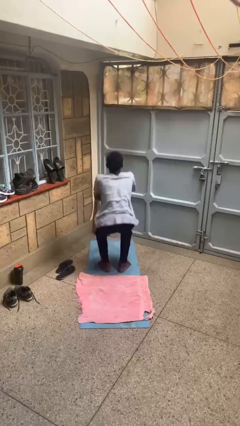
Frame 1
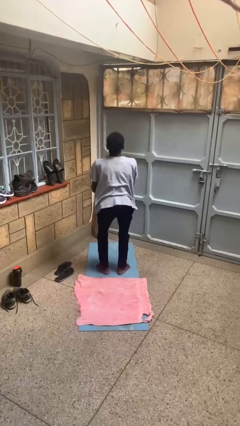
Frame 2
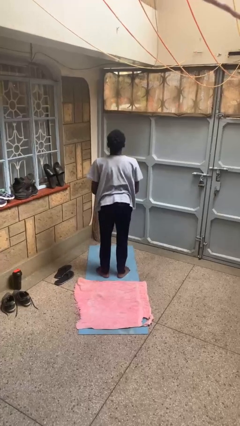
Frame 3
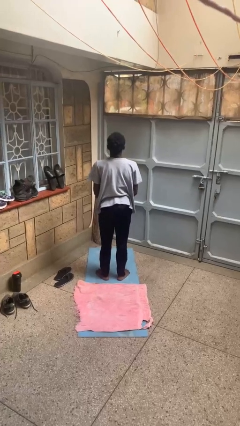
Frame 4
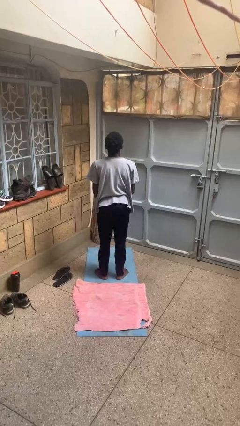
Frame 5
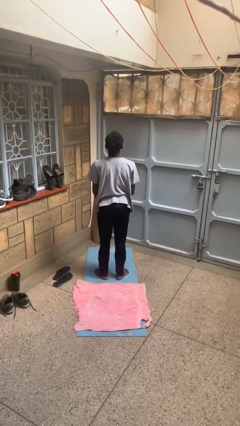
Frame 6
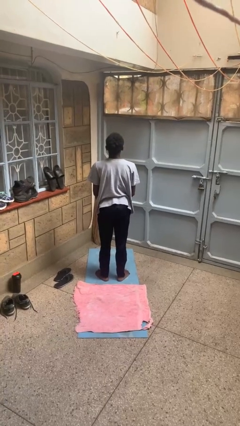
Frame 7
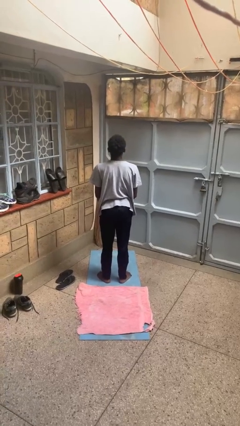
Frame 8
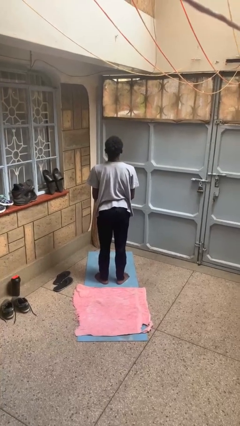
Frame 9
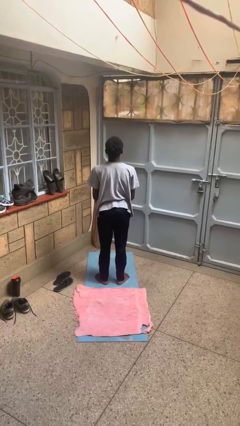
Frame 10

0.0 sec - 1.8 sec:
person stands up

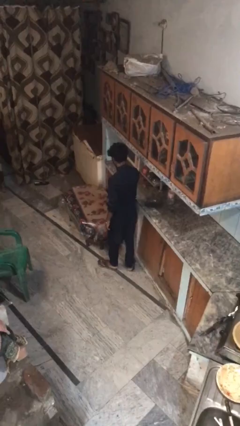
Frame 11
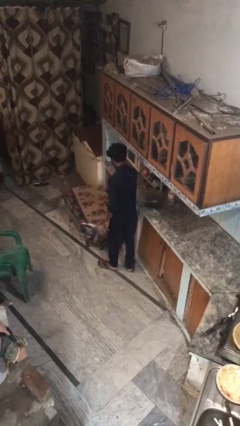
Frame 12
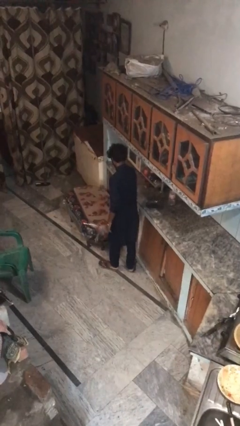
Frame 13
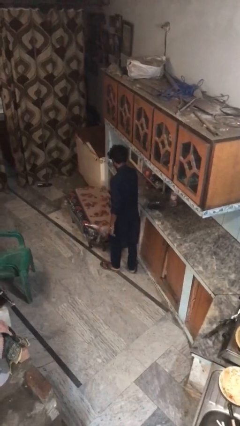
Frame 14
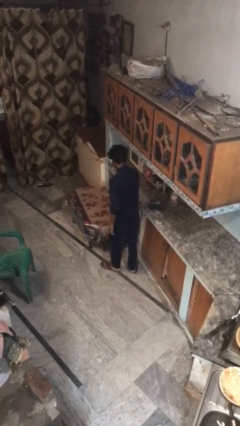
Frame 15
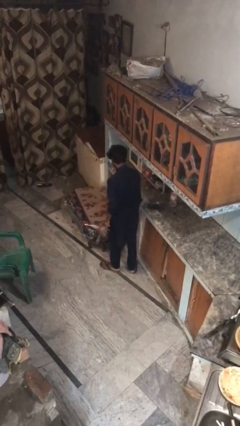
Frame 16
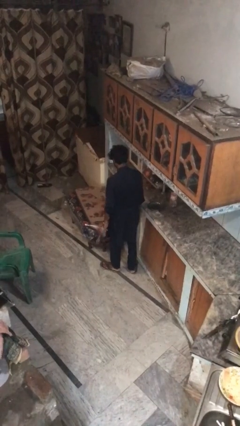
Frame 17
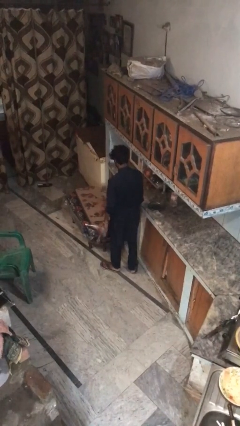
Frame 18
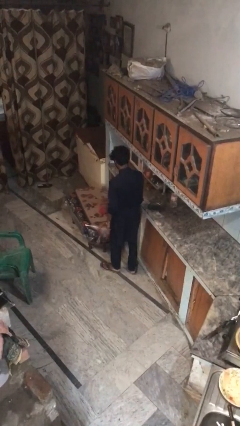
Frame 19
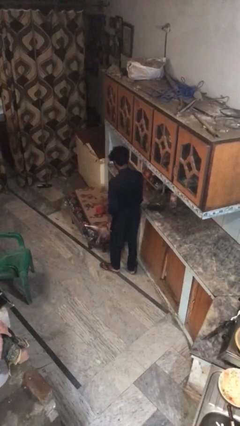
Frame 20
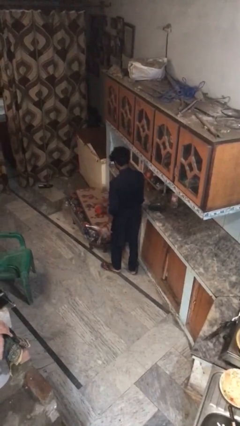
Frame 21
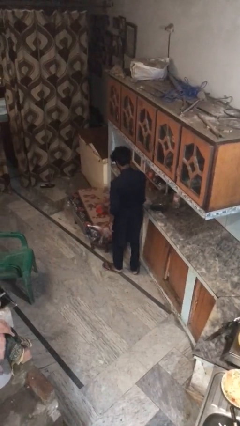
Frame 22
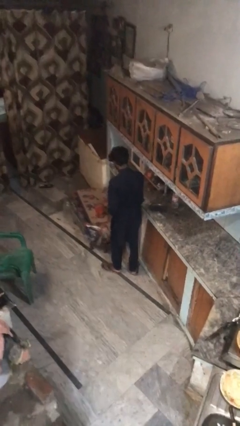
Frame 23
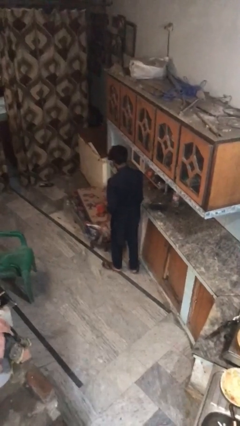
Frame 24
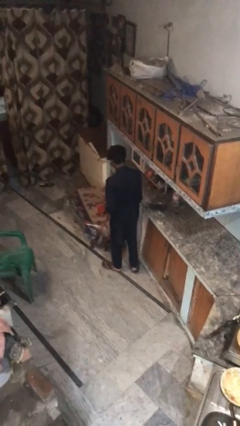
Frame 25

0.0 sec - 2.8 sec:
person throws object on table

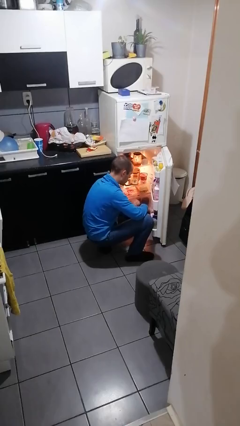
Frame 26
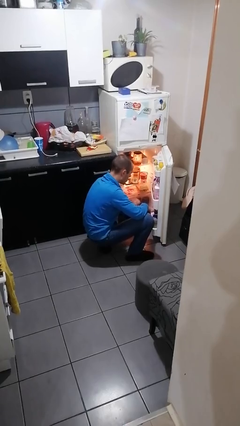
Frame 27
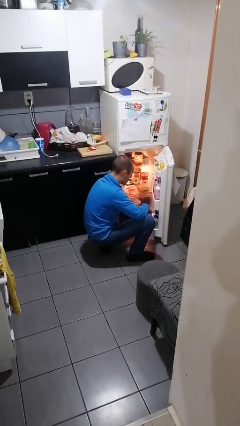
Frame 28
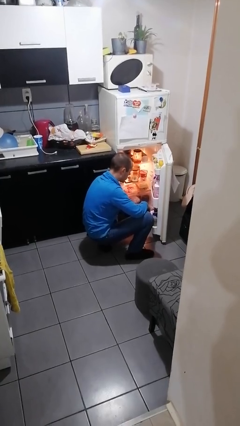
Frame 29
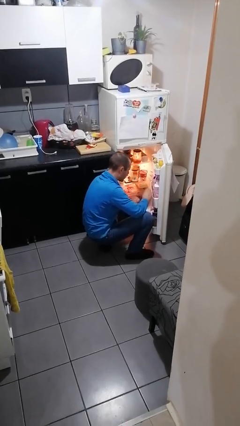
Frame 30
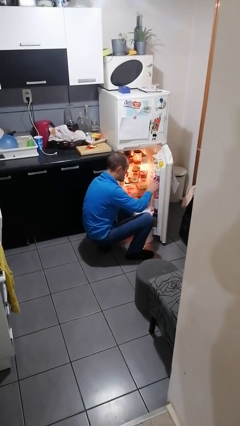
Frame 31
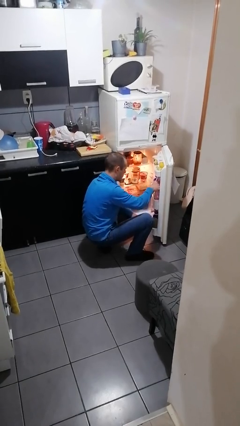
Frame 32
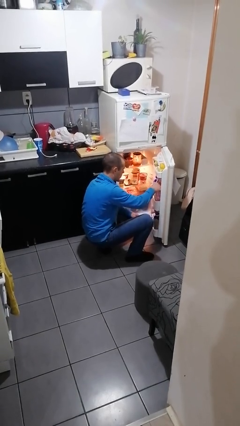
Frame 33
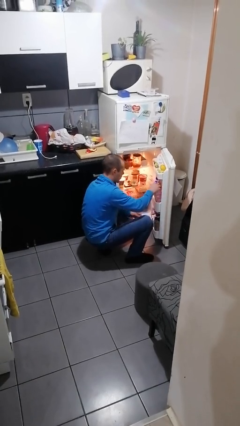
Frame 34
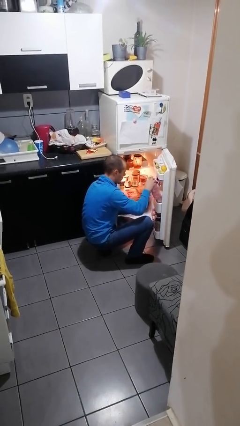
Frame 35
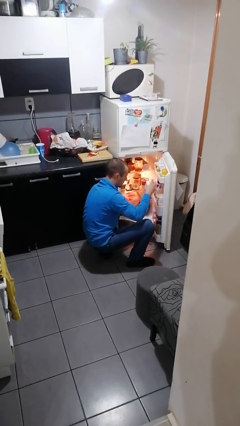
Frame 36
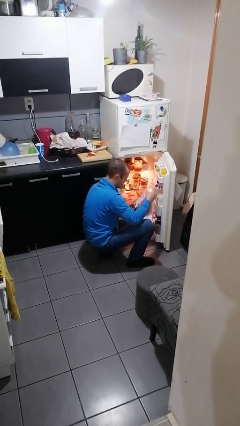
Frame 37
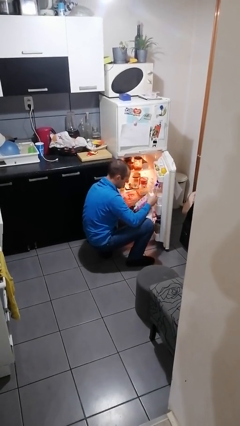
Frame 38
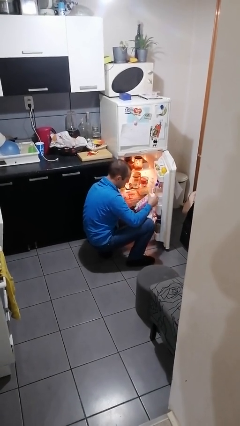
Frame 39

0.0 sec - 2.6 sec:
person takes object from refrigerator

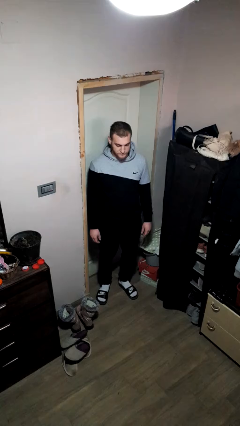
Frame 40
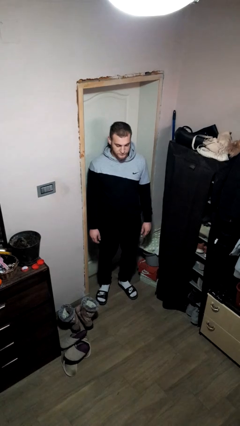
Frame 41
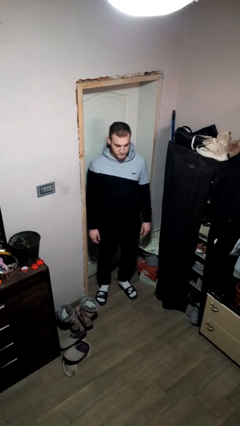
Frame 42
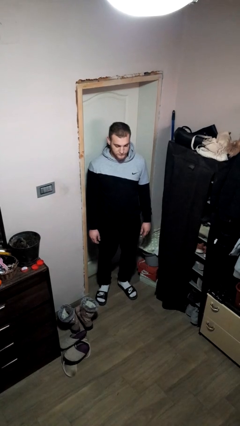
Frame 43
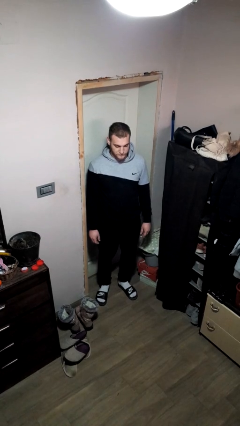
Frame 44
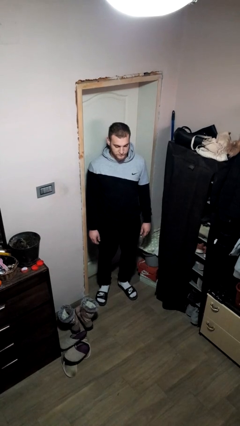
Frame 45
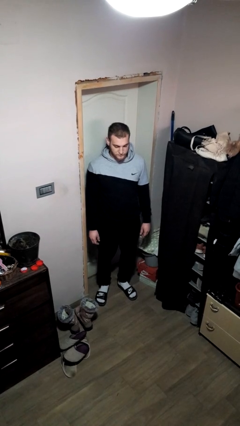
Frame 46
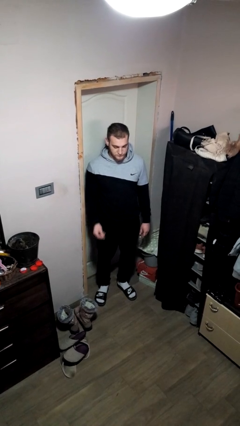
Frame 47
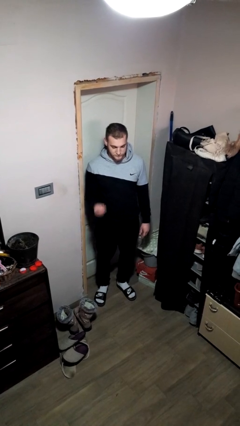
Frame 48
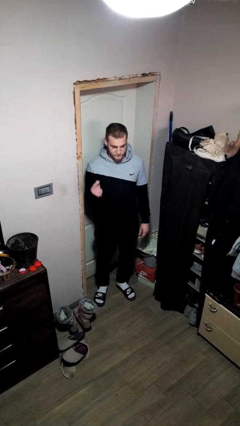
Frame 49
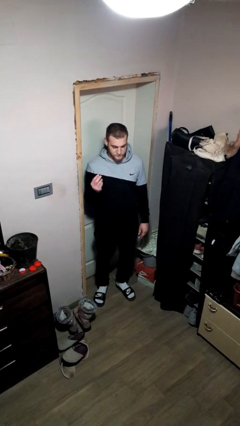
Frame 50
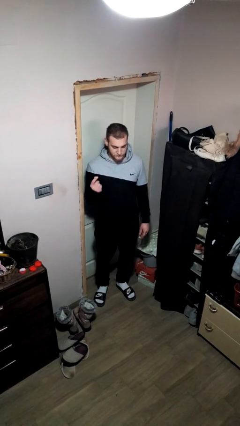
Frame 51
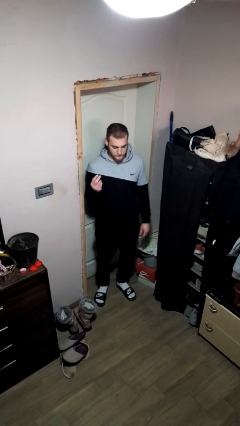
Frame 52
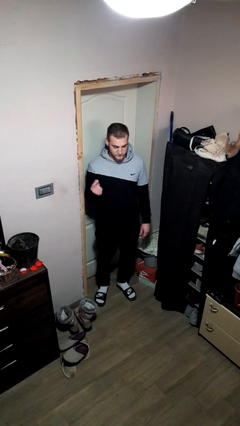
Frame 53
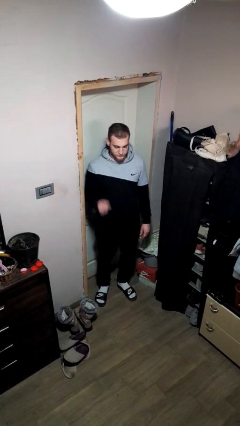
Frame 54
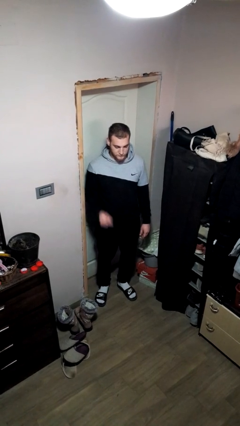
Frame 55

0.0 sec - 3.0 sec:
person snaps fingers

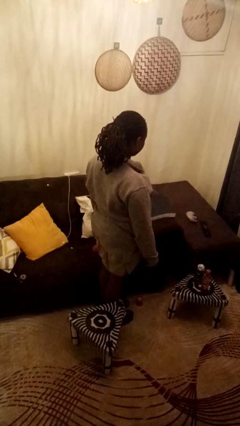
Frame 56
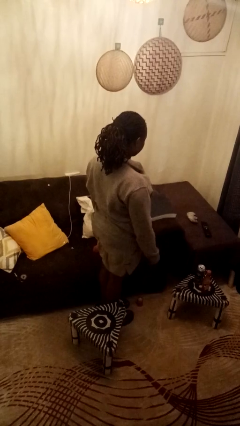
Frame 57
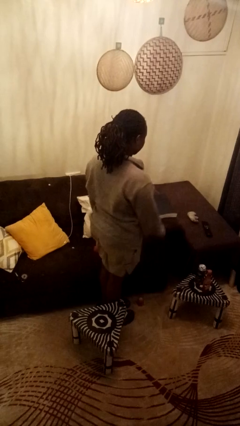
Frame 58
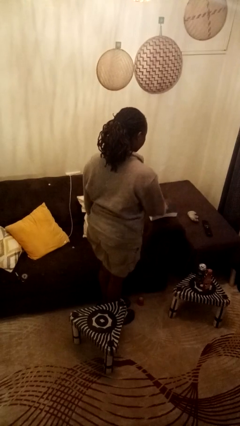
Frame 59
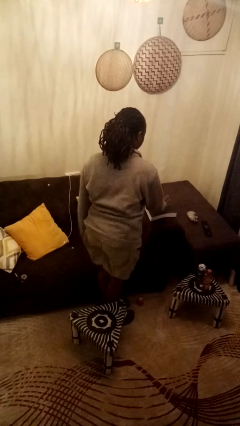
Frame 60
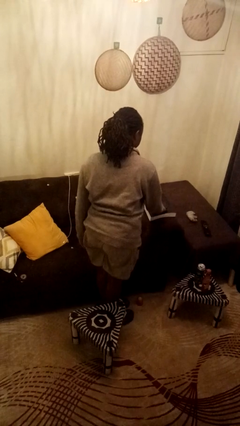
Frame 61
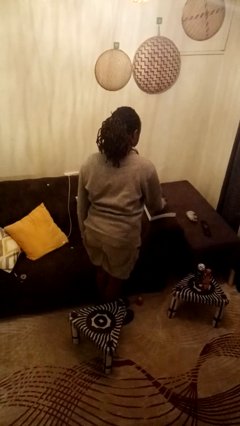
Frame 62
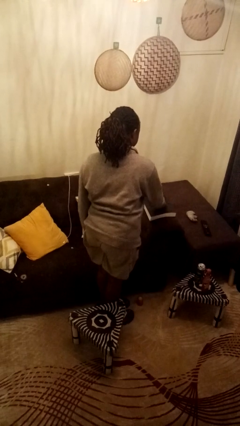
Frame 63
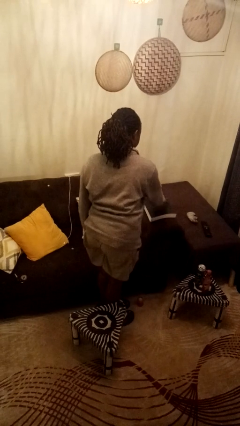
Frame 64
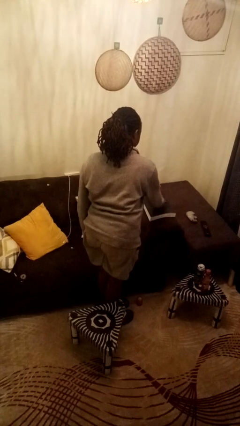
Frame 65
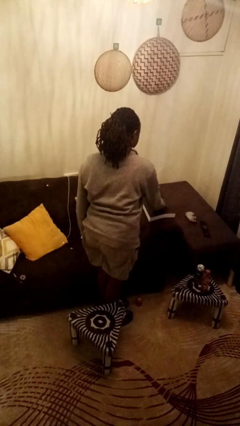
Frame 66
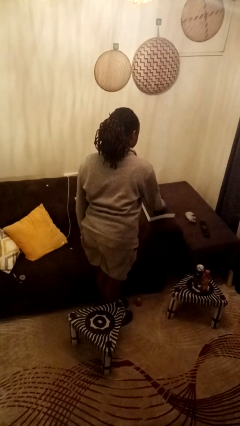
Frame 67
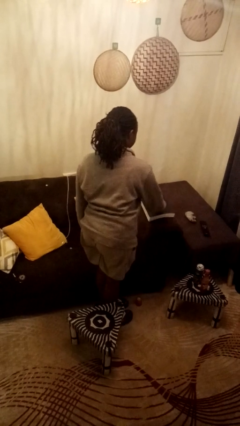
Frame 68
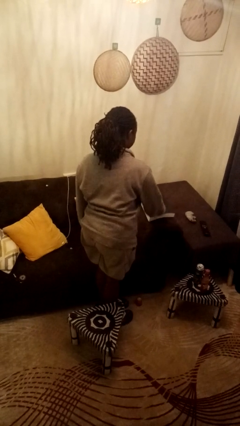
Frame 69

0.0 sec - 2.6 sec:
person taps object with finger

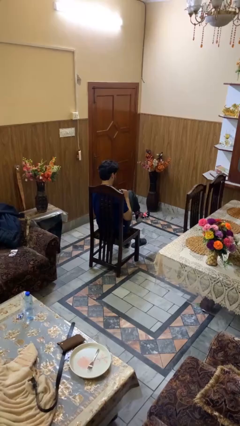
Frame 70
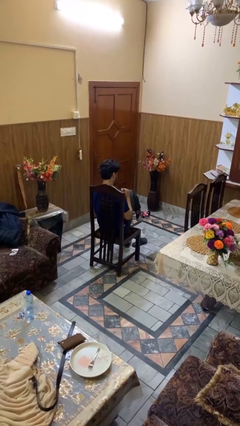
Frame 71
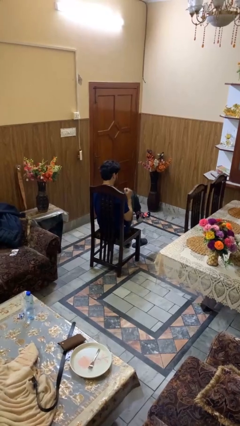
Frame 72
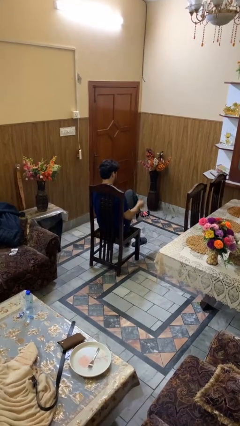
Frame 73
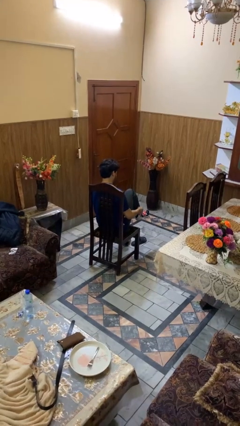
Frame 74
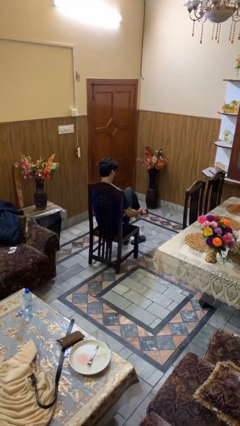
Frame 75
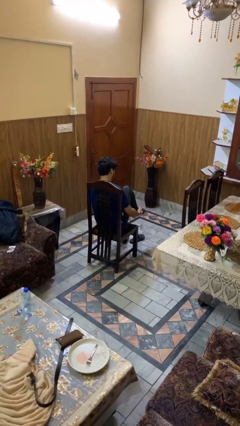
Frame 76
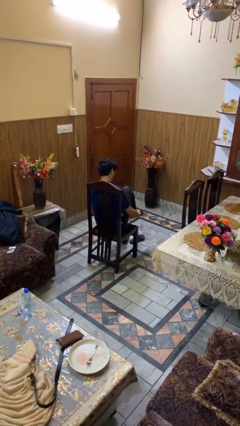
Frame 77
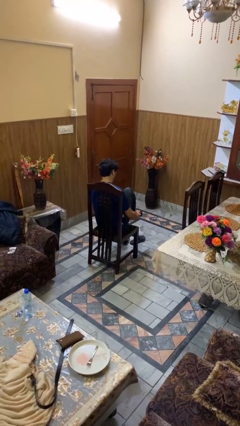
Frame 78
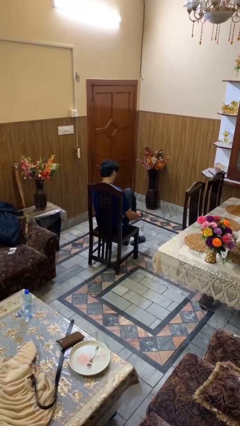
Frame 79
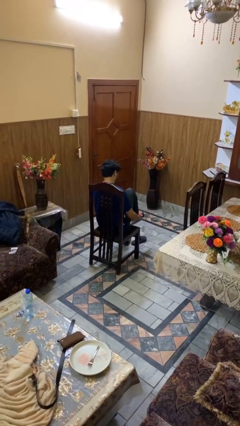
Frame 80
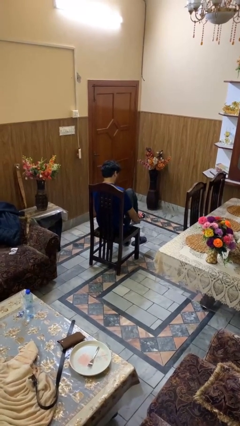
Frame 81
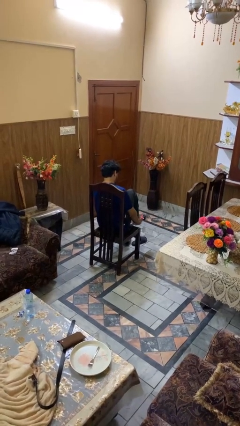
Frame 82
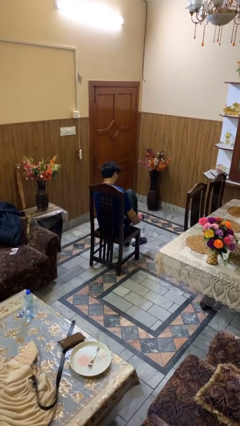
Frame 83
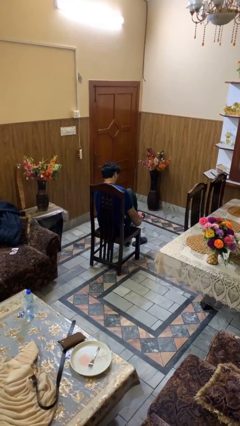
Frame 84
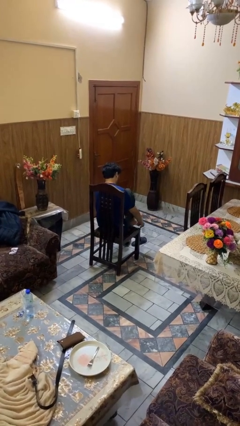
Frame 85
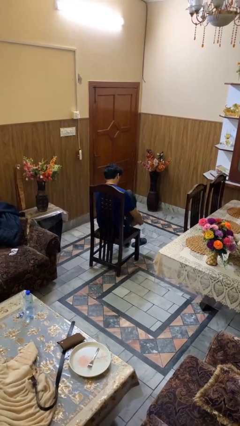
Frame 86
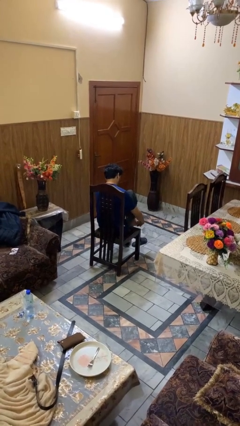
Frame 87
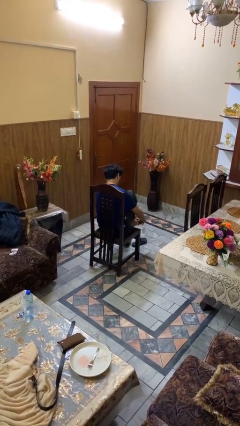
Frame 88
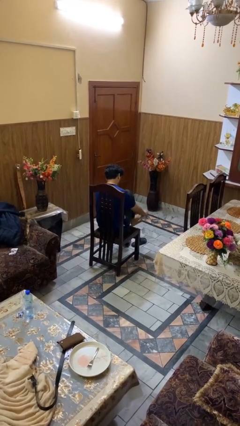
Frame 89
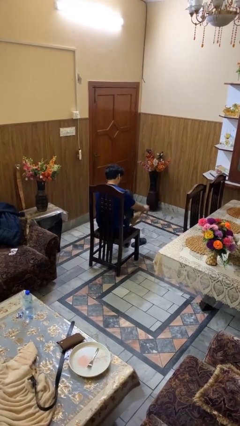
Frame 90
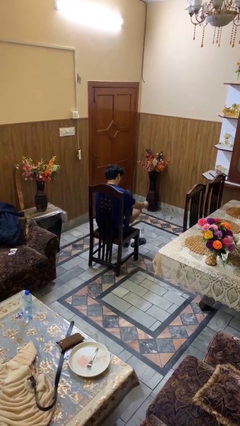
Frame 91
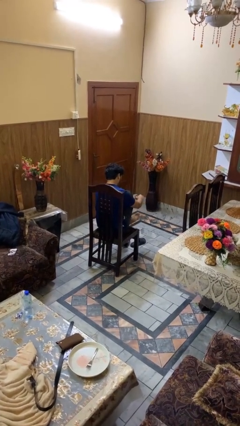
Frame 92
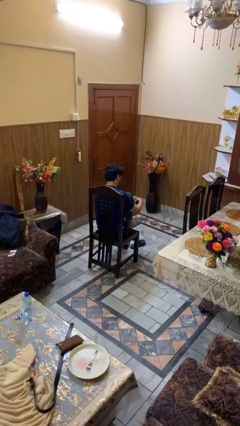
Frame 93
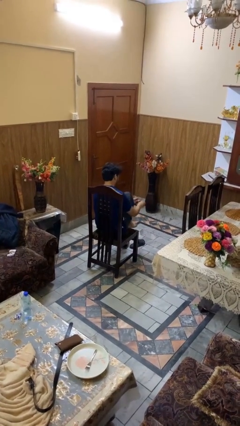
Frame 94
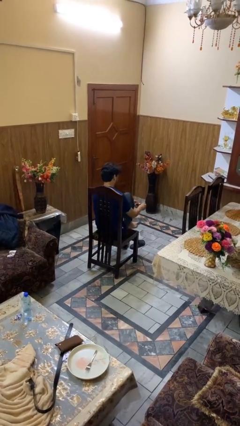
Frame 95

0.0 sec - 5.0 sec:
person takes off socks
